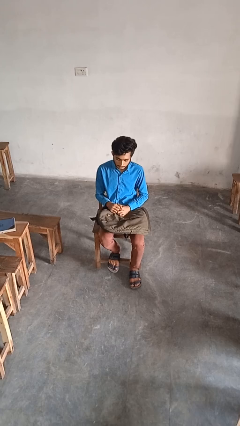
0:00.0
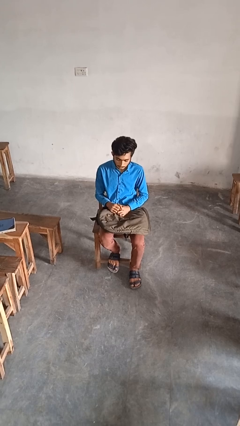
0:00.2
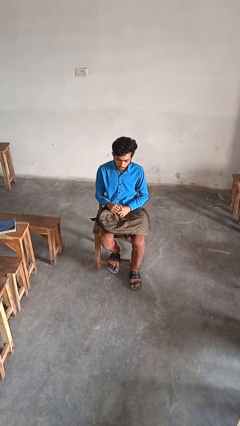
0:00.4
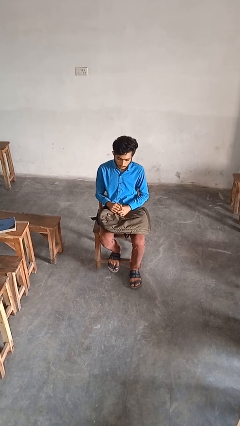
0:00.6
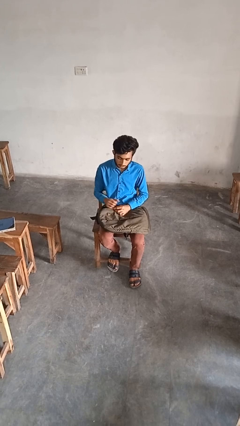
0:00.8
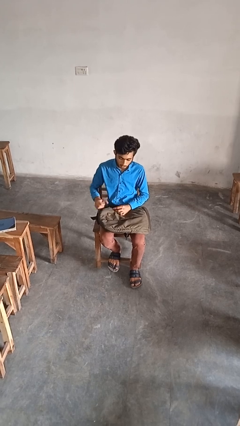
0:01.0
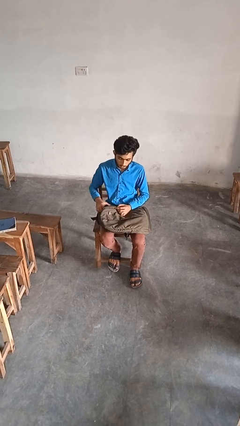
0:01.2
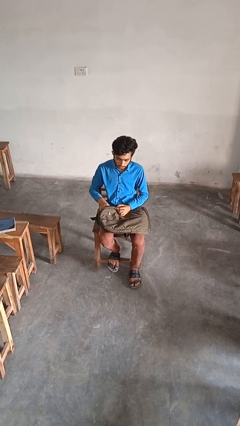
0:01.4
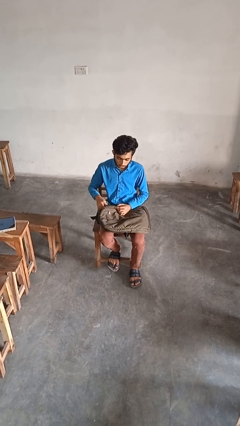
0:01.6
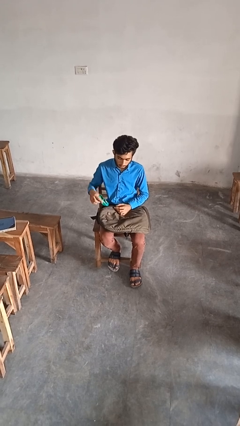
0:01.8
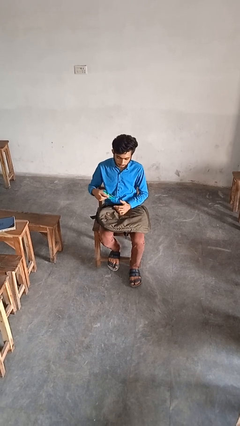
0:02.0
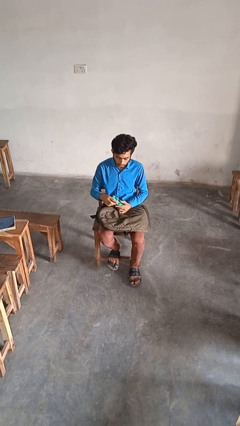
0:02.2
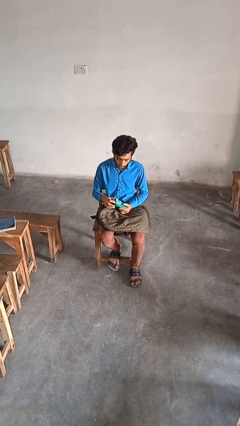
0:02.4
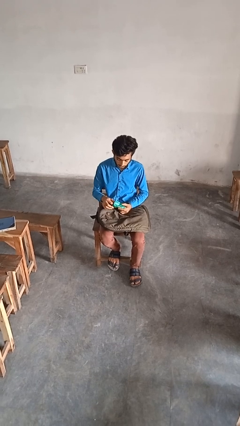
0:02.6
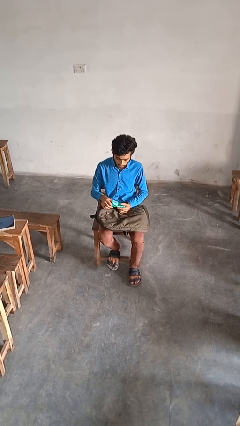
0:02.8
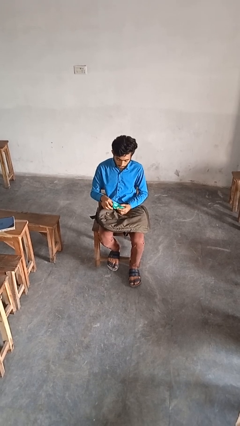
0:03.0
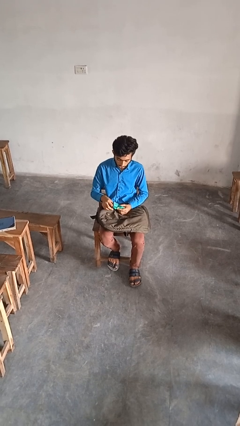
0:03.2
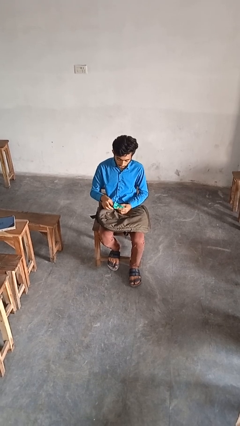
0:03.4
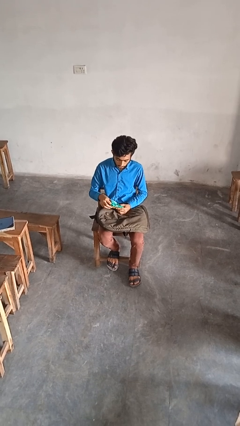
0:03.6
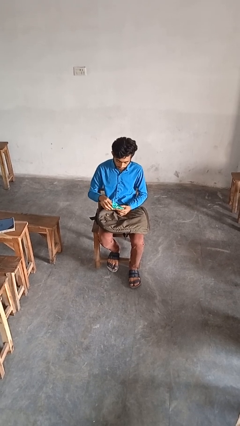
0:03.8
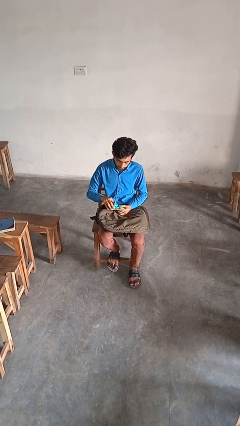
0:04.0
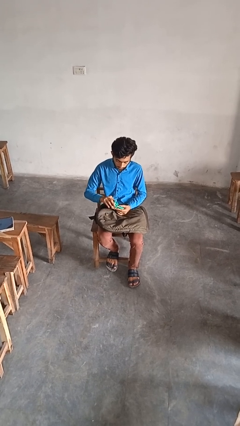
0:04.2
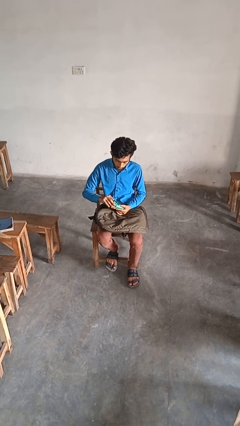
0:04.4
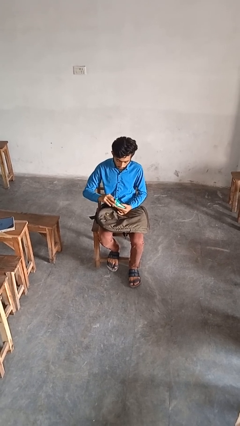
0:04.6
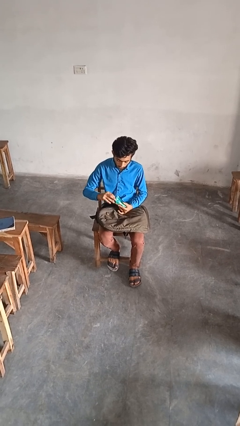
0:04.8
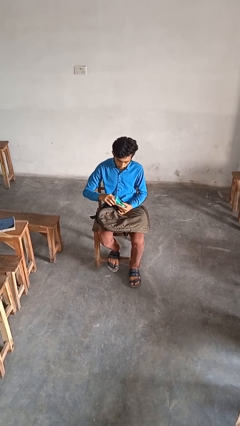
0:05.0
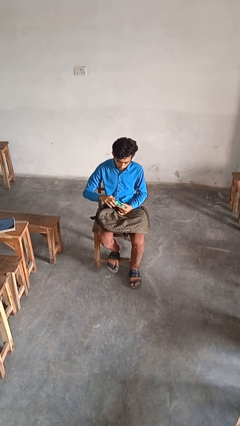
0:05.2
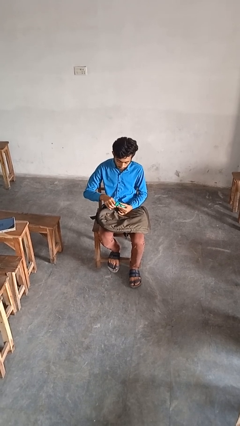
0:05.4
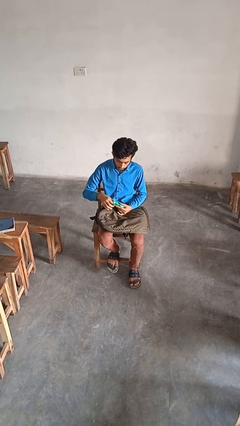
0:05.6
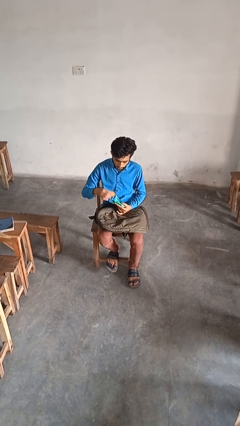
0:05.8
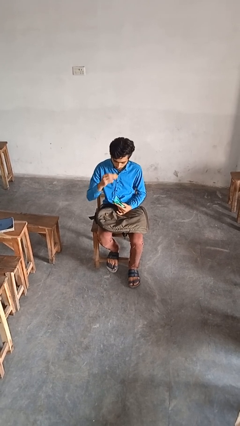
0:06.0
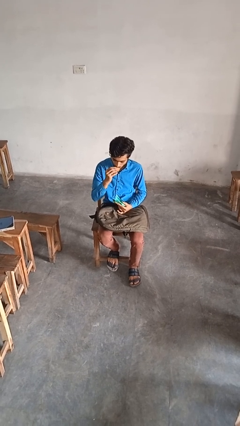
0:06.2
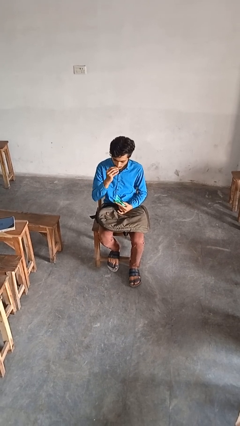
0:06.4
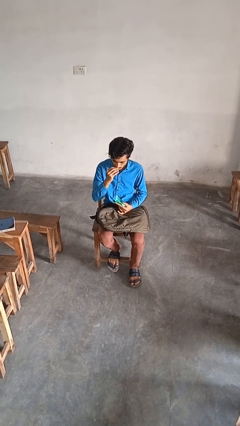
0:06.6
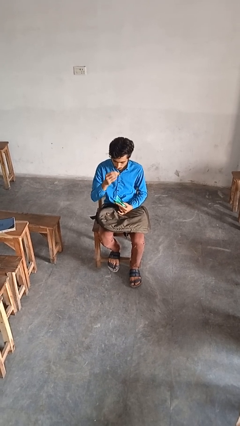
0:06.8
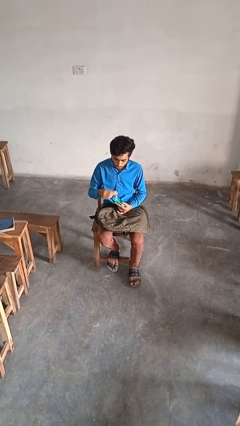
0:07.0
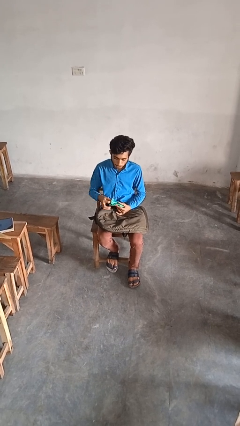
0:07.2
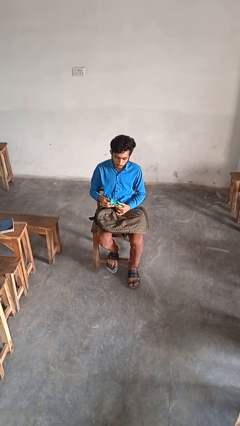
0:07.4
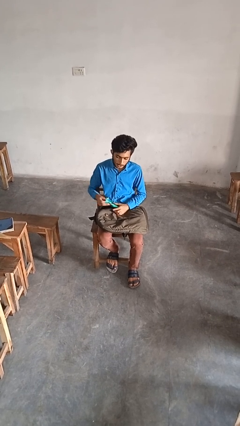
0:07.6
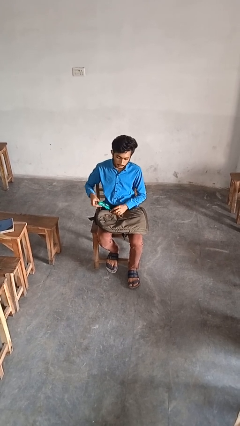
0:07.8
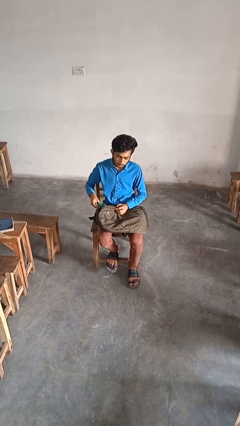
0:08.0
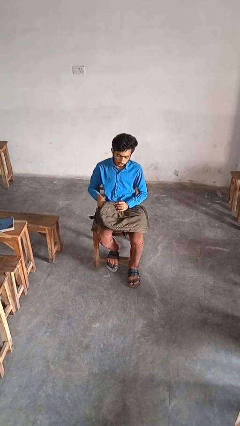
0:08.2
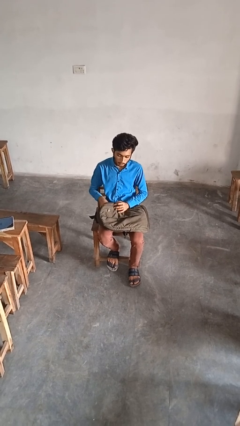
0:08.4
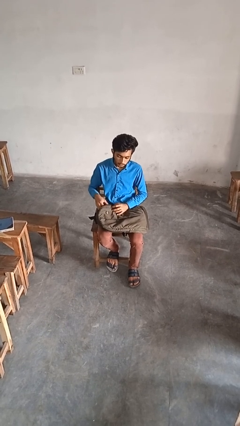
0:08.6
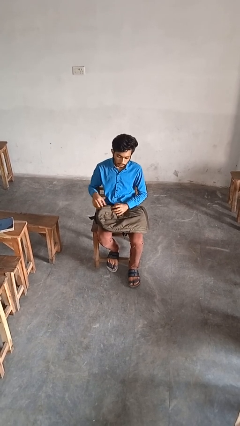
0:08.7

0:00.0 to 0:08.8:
person eats snack from bag

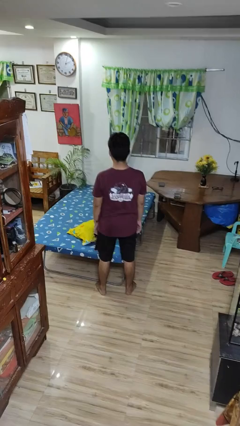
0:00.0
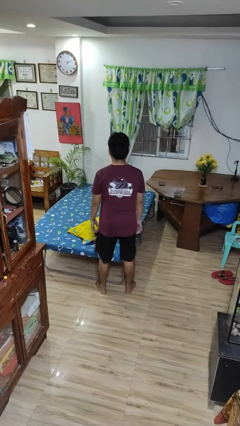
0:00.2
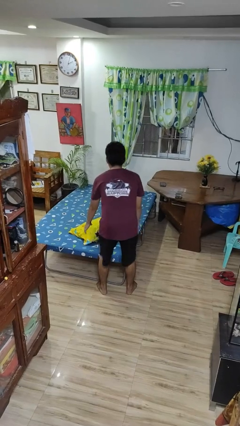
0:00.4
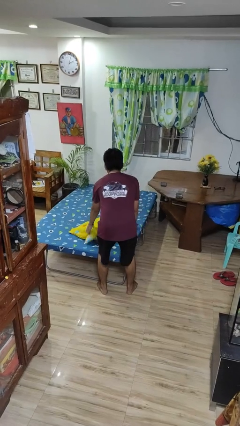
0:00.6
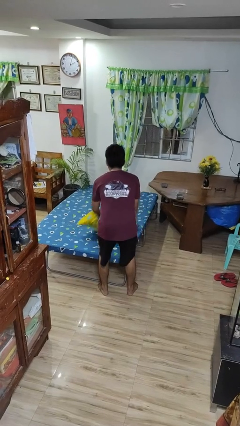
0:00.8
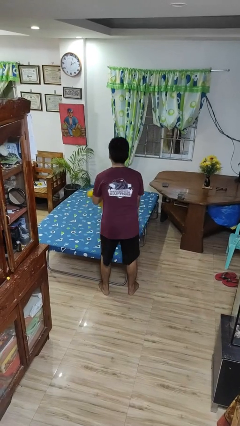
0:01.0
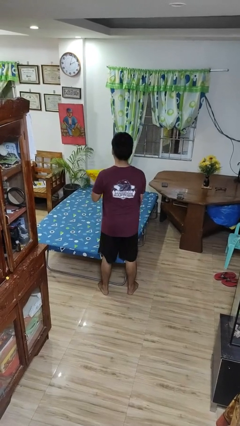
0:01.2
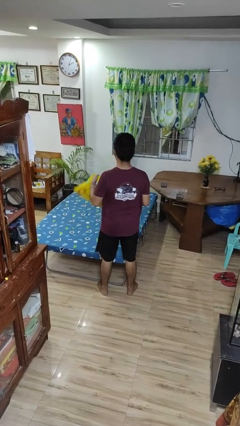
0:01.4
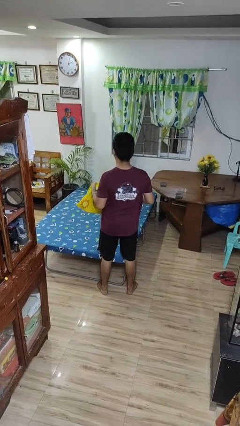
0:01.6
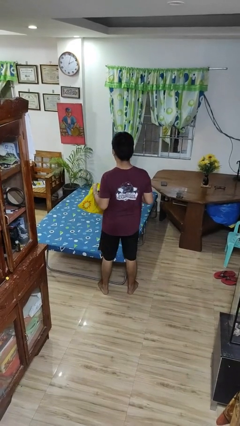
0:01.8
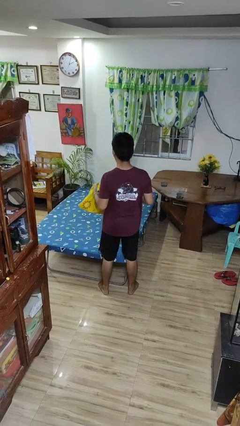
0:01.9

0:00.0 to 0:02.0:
person picks up object from bed

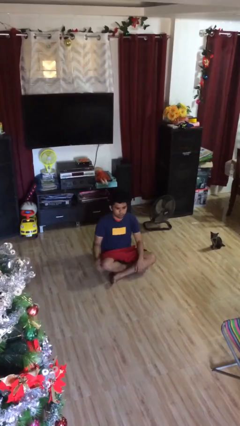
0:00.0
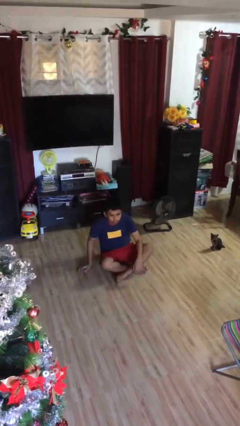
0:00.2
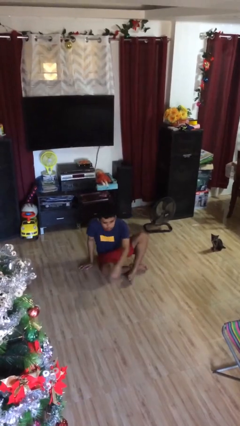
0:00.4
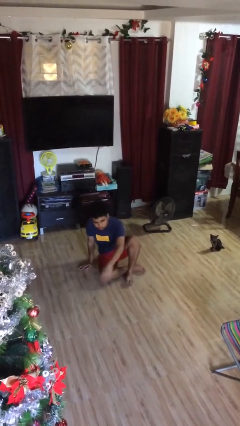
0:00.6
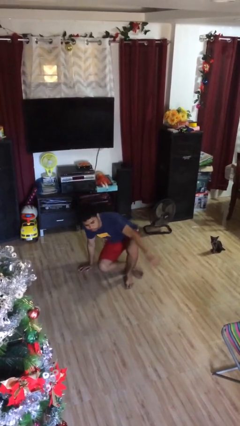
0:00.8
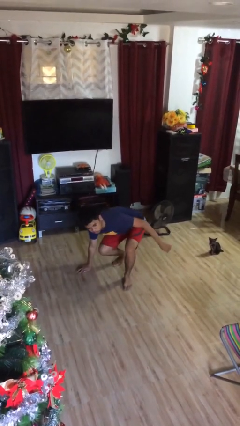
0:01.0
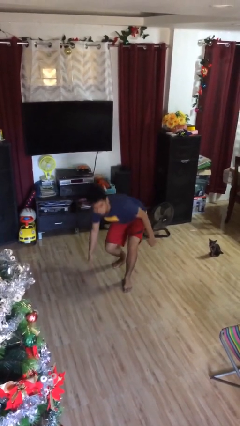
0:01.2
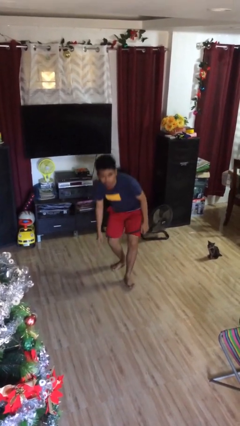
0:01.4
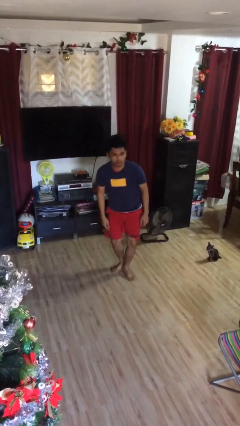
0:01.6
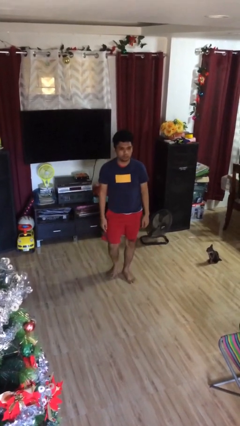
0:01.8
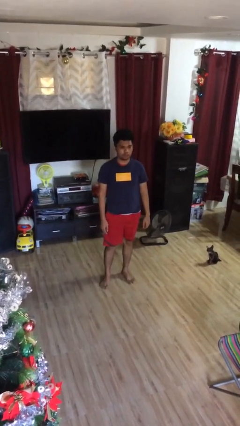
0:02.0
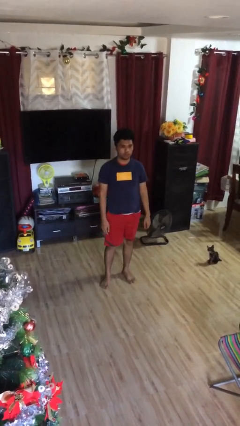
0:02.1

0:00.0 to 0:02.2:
person stands up

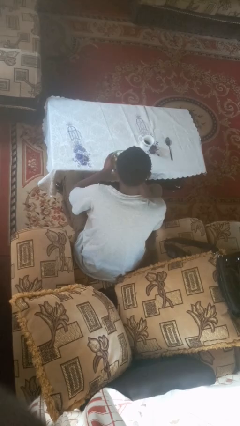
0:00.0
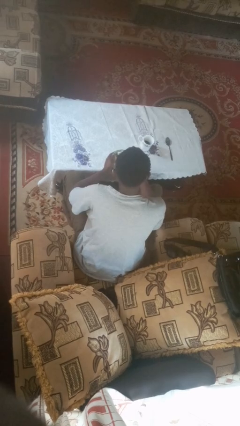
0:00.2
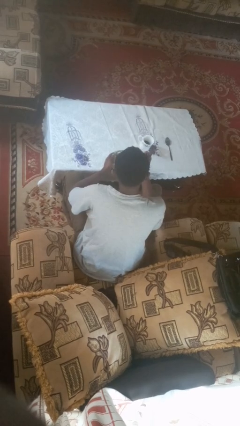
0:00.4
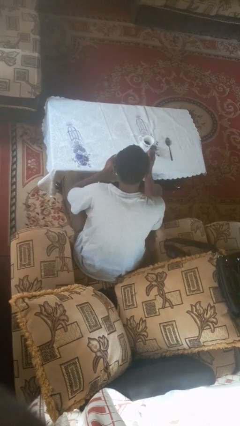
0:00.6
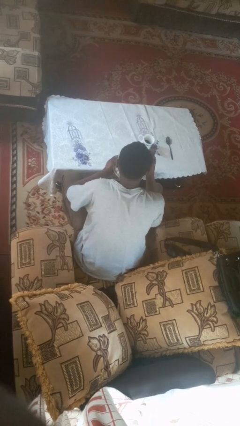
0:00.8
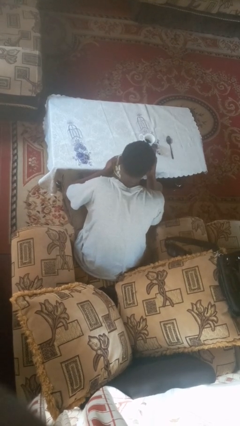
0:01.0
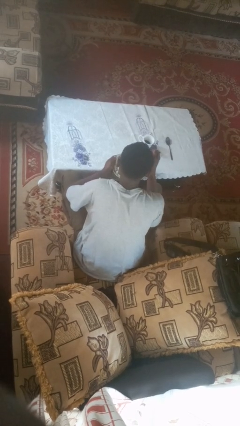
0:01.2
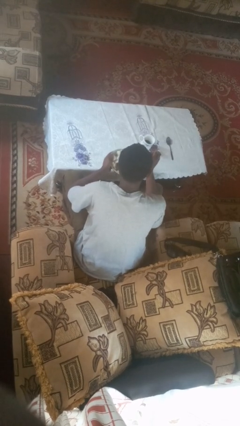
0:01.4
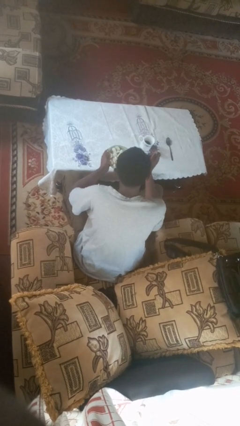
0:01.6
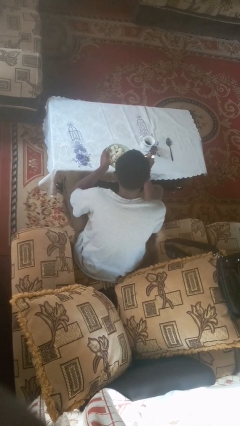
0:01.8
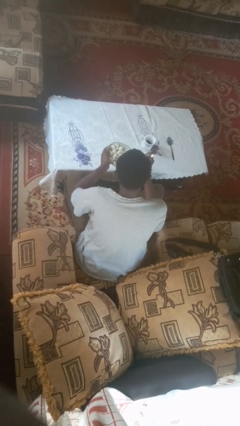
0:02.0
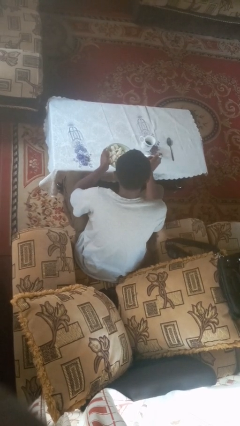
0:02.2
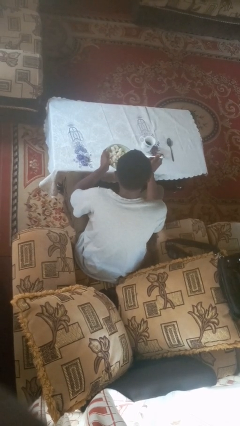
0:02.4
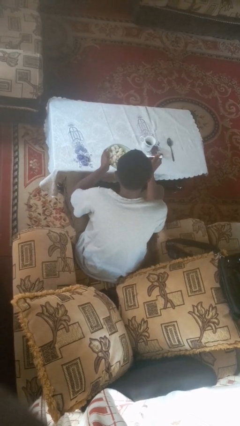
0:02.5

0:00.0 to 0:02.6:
person eats with utensil

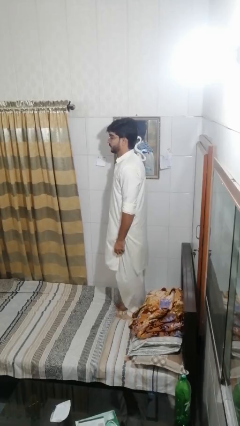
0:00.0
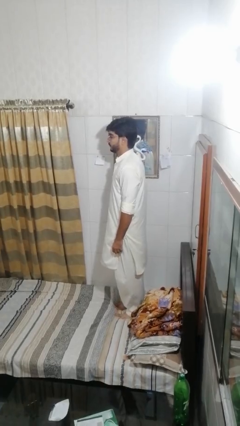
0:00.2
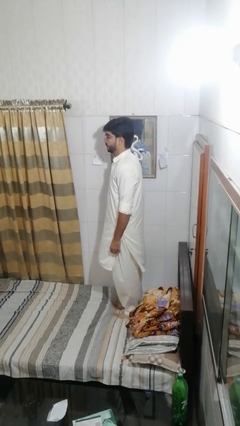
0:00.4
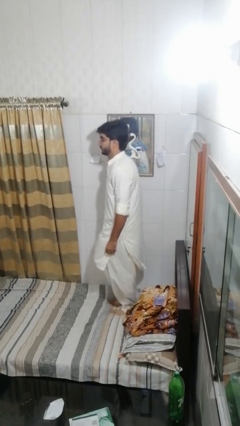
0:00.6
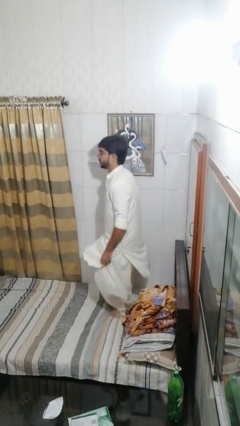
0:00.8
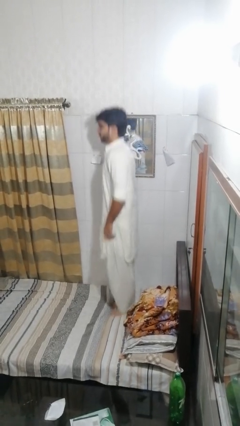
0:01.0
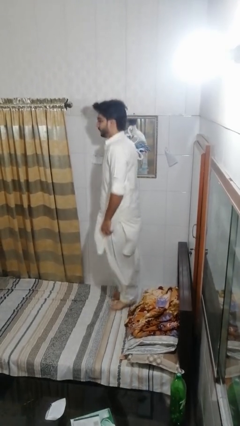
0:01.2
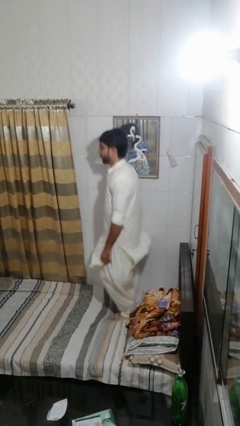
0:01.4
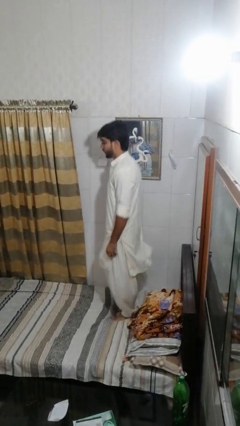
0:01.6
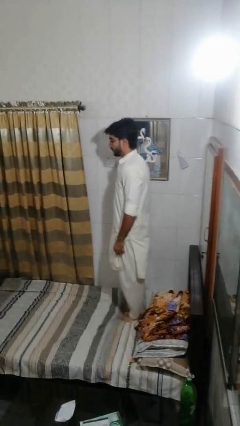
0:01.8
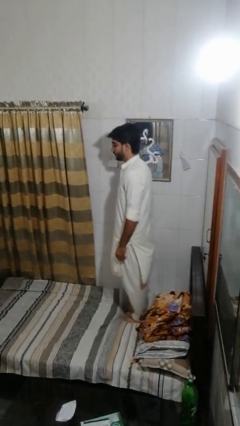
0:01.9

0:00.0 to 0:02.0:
person jumps on bed
